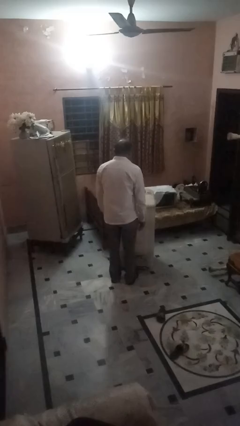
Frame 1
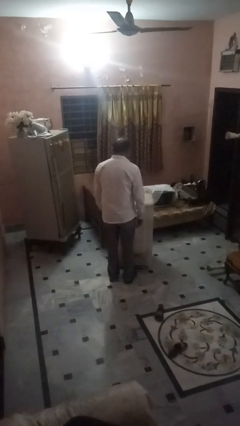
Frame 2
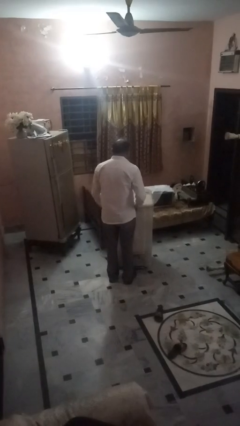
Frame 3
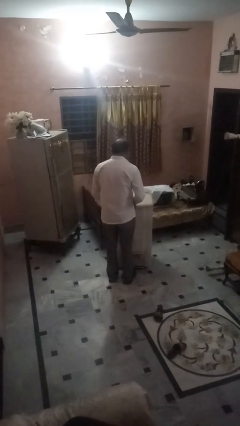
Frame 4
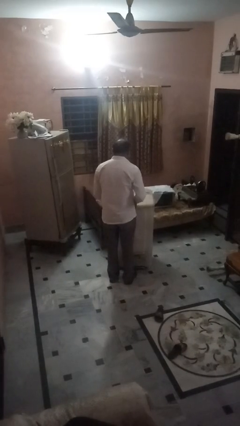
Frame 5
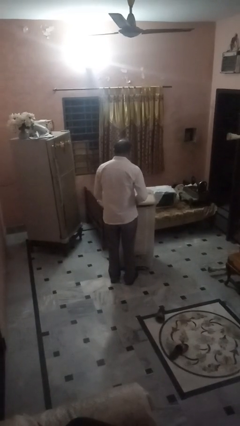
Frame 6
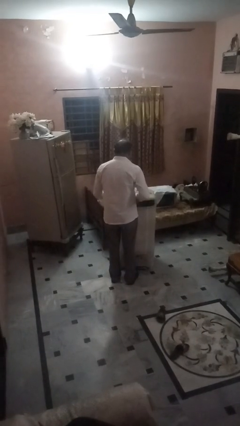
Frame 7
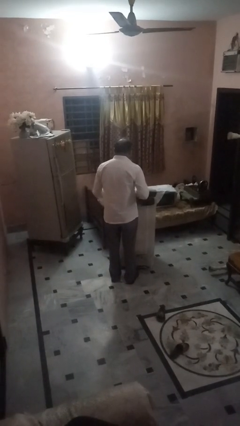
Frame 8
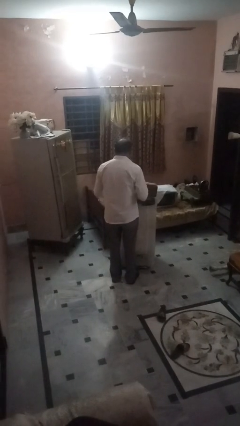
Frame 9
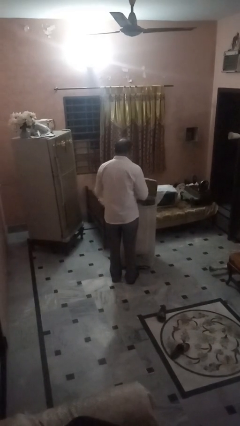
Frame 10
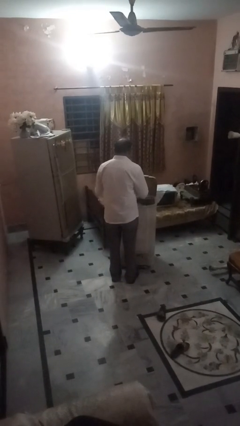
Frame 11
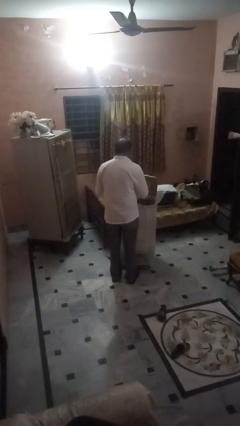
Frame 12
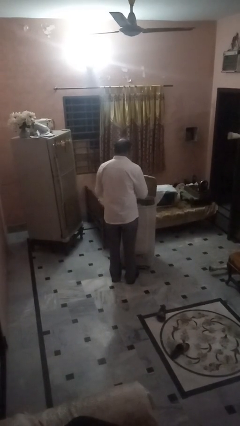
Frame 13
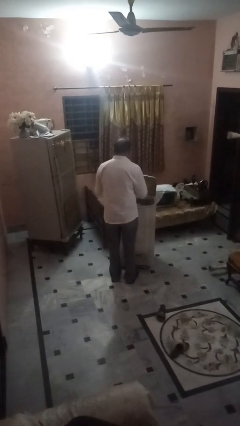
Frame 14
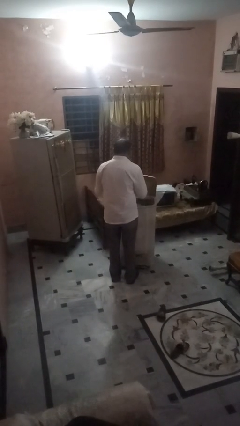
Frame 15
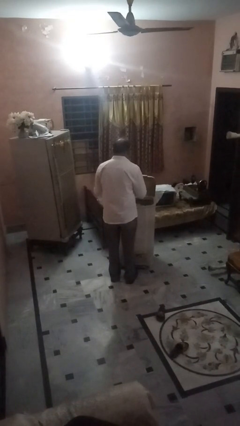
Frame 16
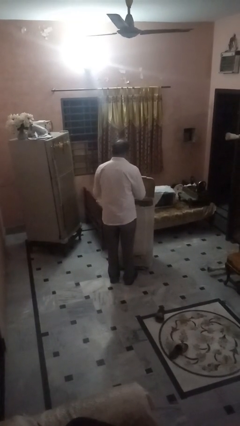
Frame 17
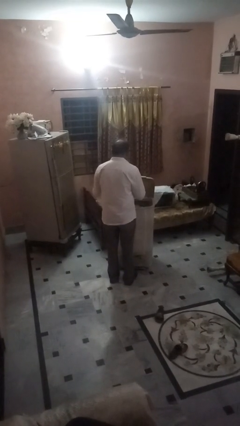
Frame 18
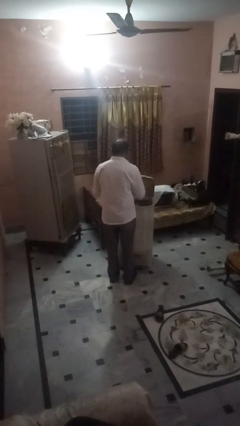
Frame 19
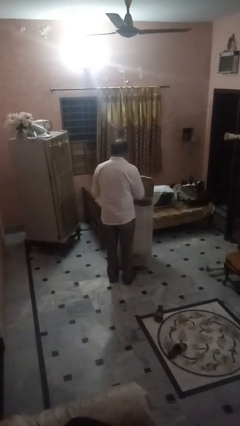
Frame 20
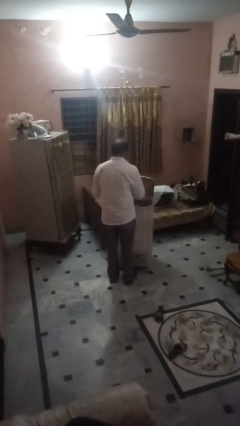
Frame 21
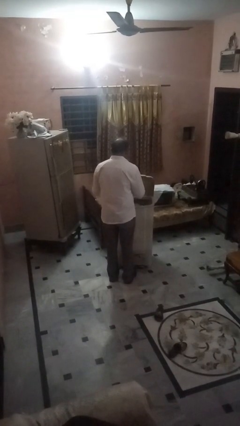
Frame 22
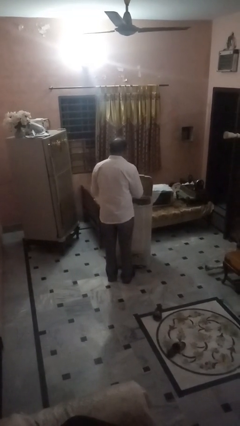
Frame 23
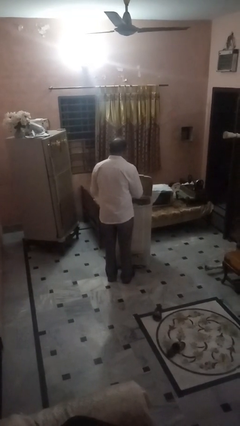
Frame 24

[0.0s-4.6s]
person opens clothes washer

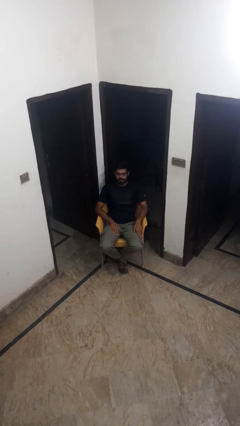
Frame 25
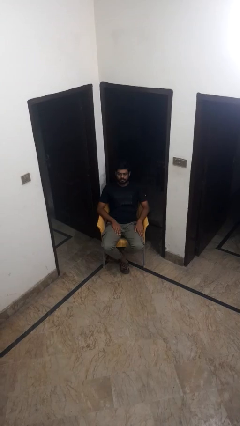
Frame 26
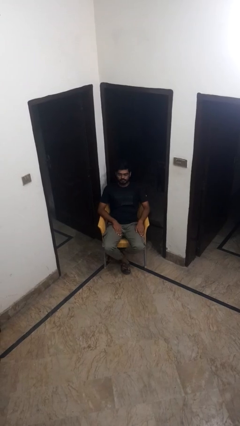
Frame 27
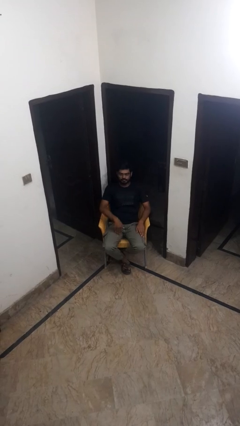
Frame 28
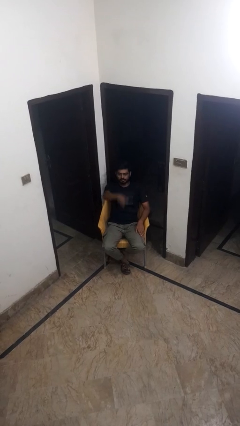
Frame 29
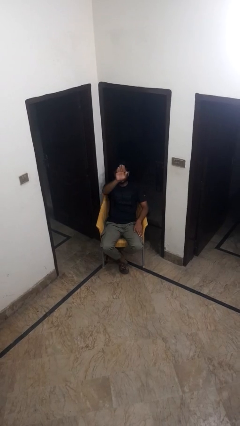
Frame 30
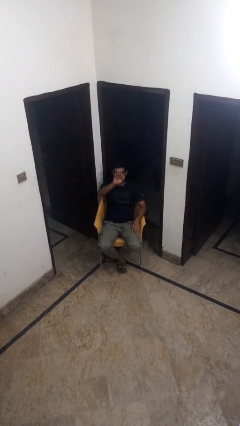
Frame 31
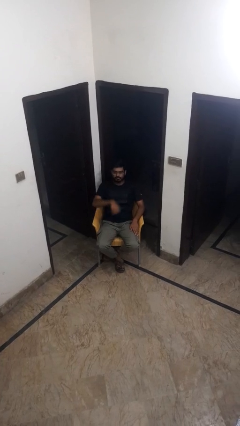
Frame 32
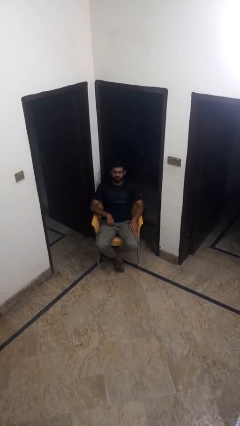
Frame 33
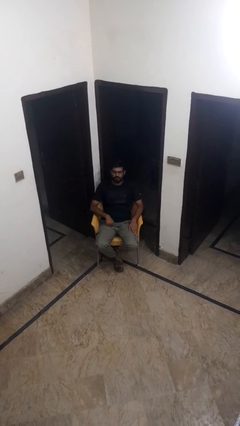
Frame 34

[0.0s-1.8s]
person gestures swipe up

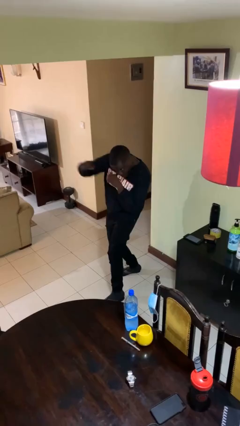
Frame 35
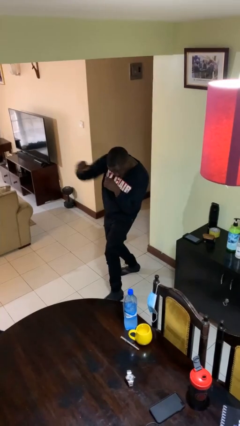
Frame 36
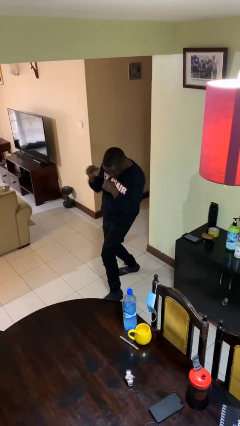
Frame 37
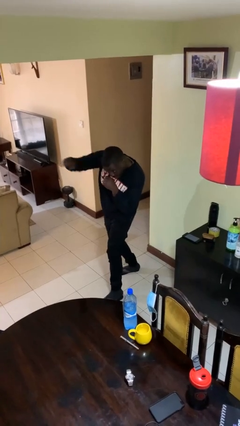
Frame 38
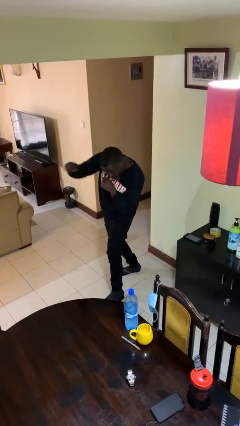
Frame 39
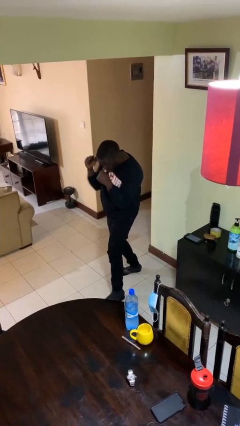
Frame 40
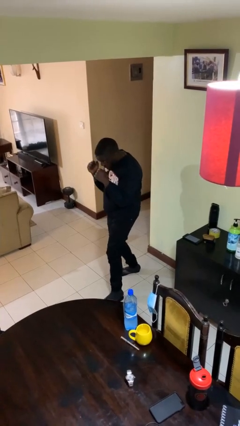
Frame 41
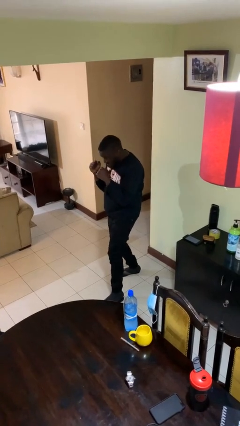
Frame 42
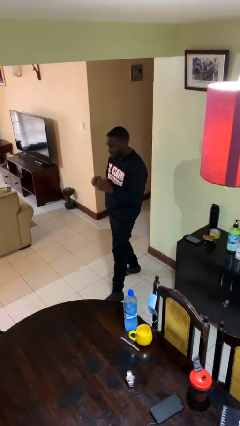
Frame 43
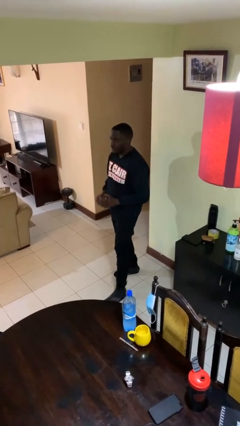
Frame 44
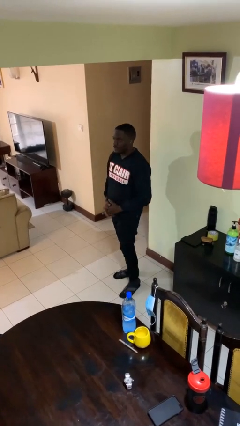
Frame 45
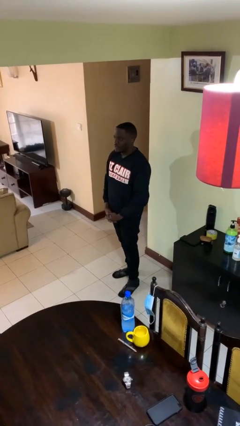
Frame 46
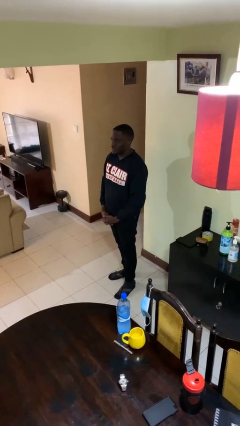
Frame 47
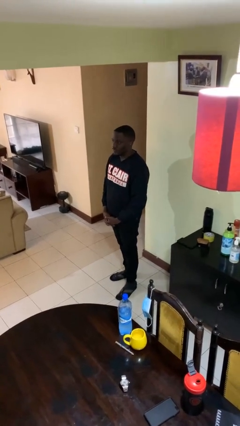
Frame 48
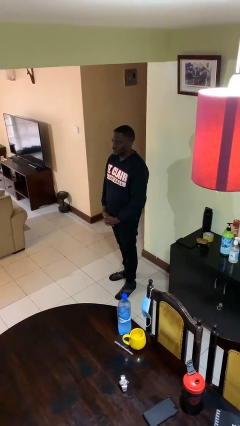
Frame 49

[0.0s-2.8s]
person punches

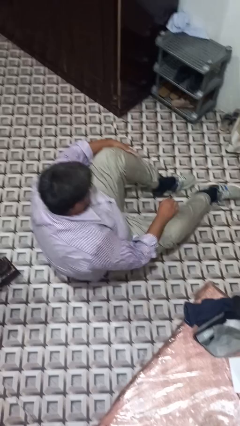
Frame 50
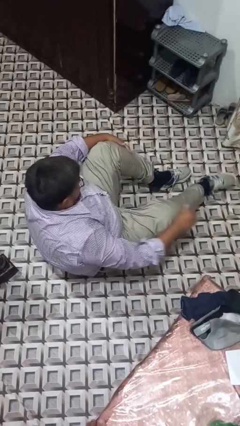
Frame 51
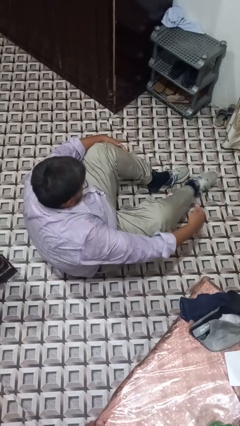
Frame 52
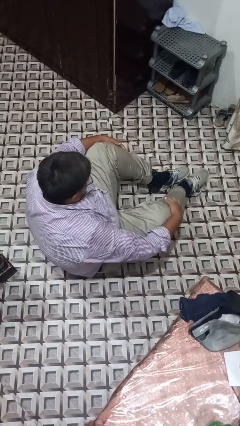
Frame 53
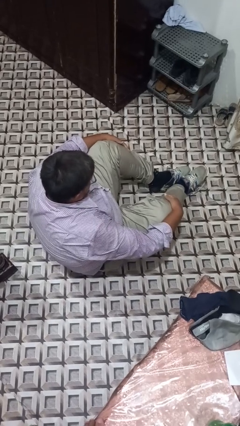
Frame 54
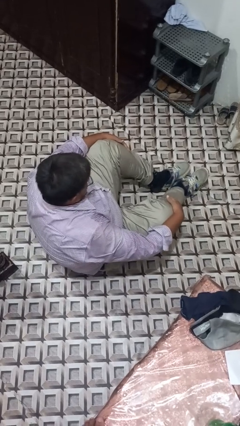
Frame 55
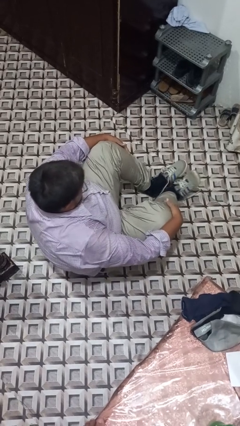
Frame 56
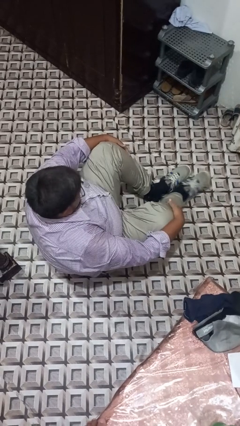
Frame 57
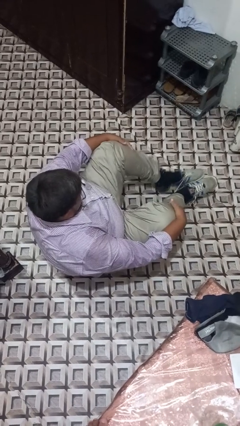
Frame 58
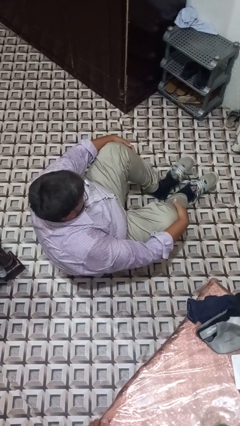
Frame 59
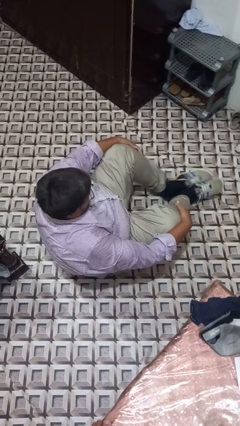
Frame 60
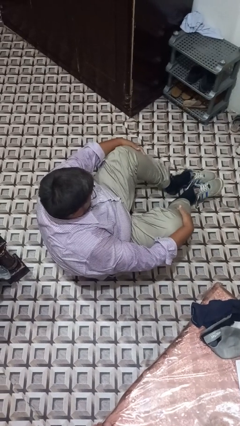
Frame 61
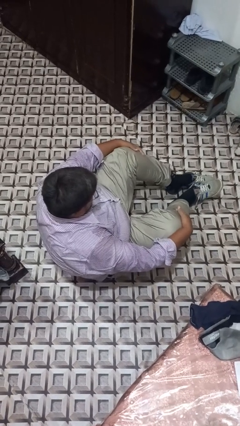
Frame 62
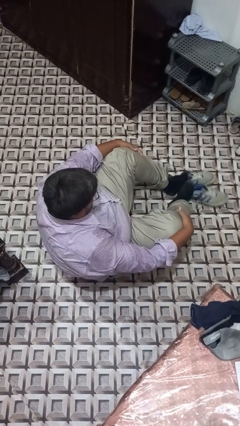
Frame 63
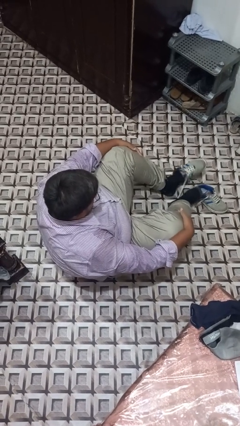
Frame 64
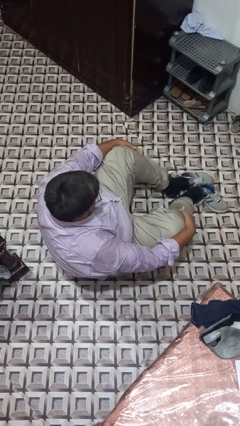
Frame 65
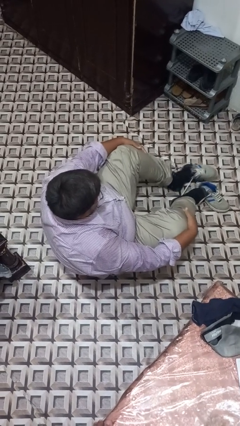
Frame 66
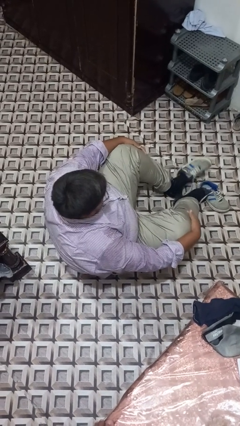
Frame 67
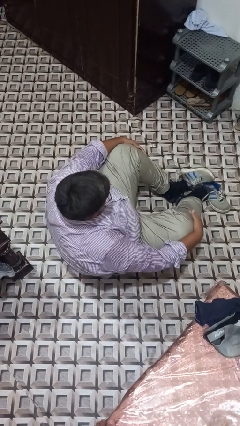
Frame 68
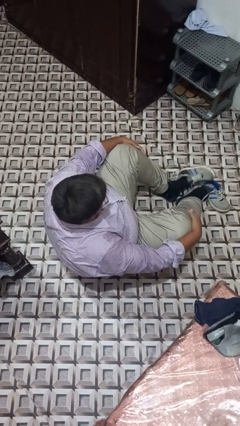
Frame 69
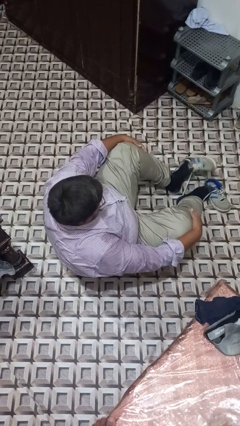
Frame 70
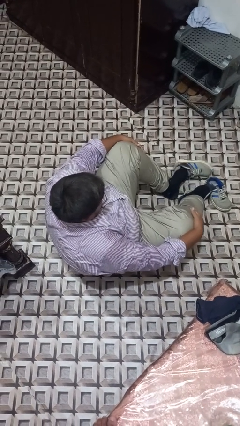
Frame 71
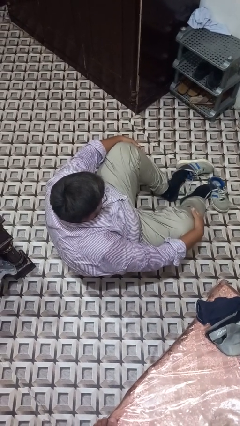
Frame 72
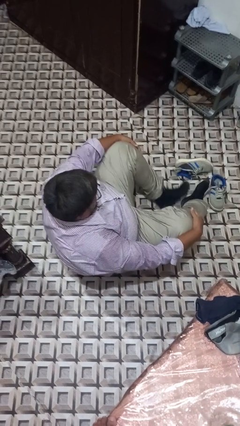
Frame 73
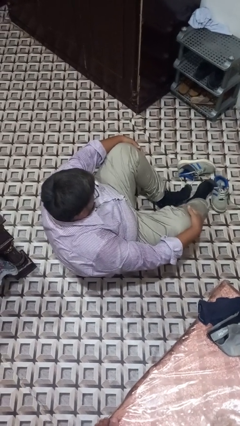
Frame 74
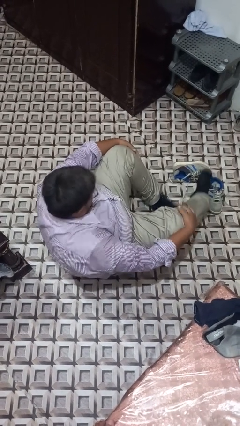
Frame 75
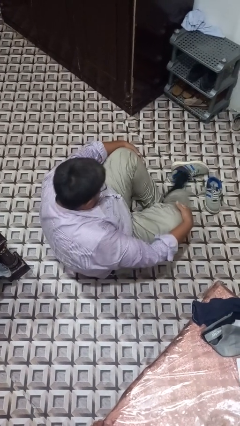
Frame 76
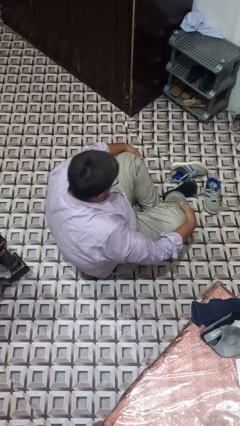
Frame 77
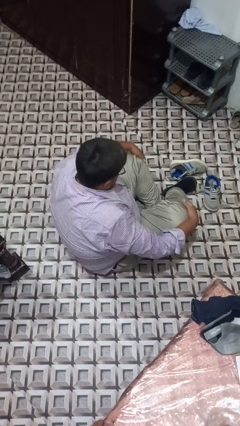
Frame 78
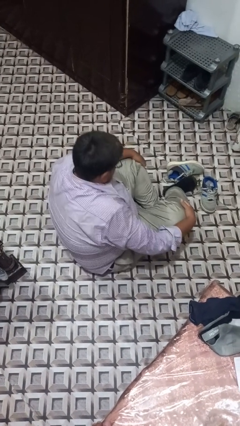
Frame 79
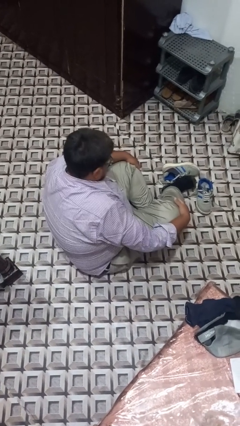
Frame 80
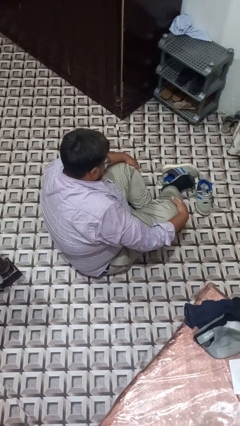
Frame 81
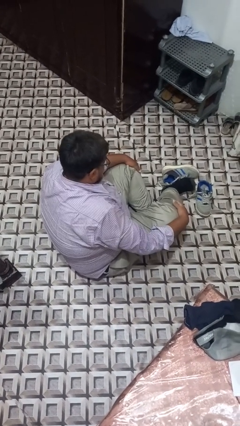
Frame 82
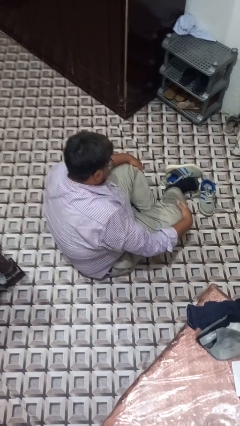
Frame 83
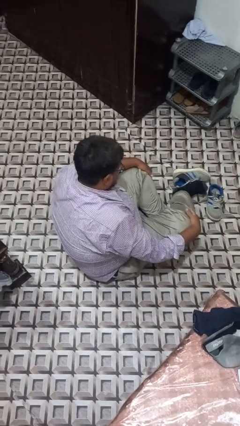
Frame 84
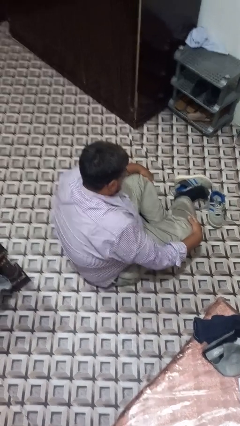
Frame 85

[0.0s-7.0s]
person takes off shoes

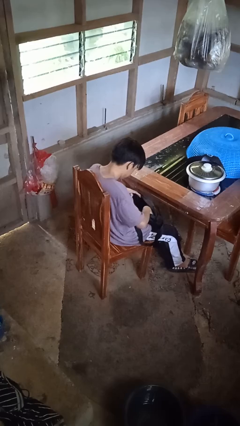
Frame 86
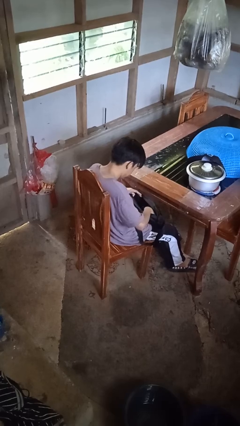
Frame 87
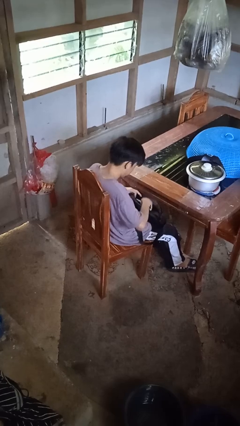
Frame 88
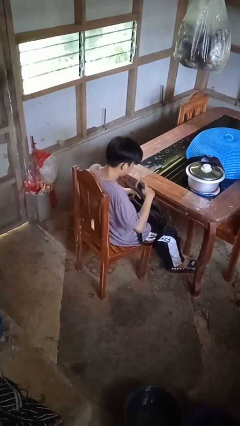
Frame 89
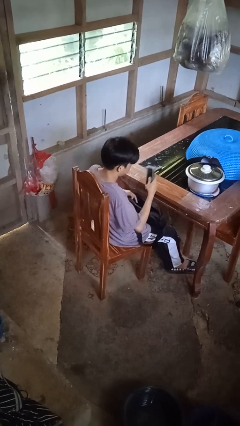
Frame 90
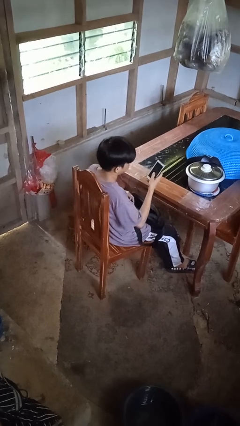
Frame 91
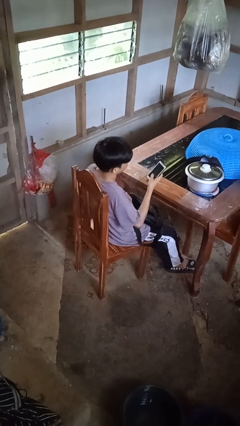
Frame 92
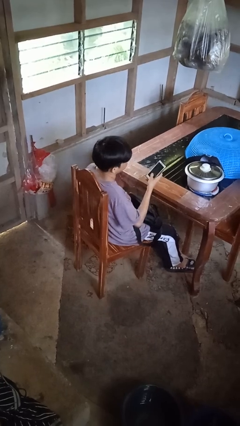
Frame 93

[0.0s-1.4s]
person takes object from purse
